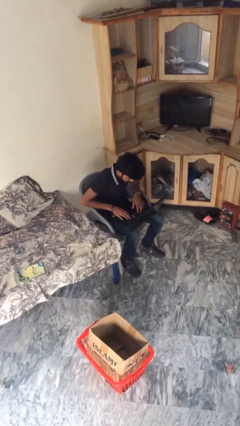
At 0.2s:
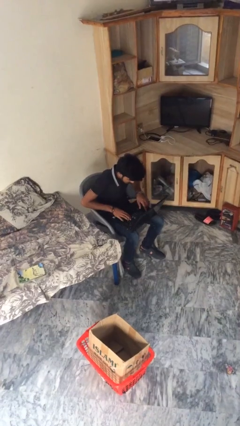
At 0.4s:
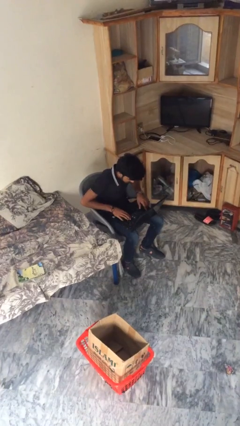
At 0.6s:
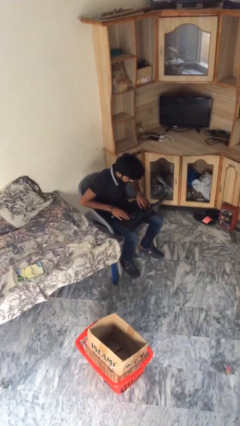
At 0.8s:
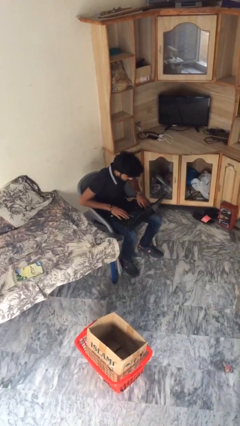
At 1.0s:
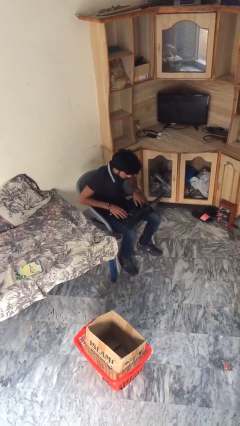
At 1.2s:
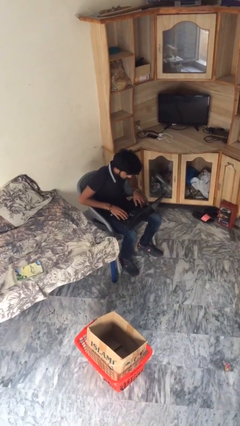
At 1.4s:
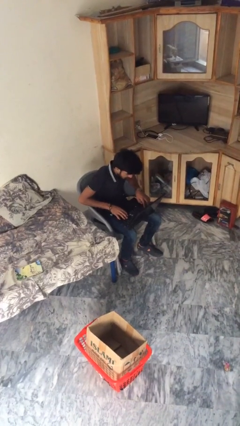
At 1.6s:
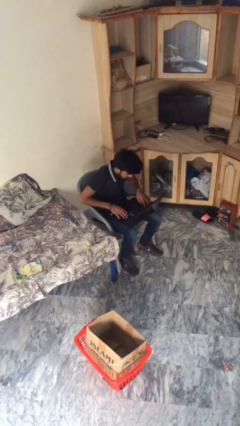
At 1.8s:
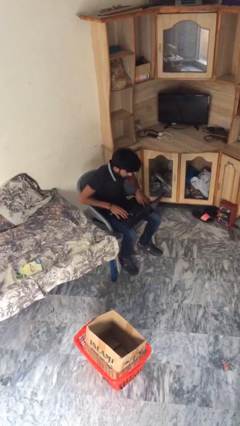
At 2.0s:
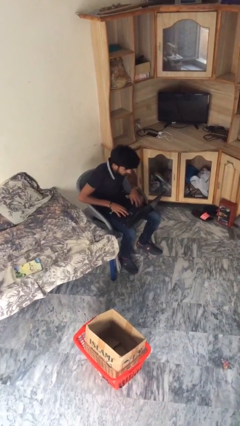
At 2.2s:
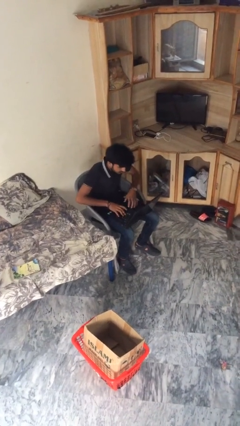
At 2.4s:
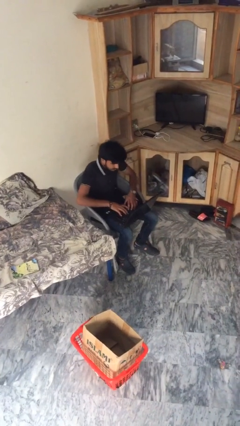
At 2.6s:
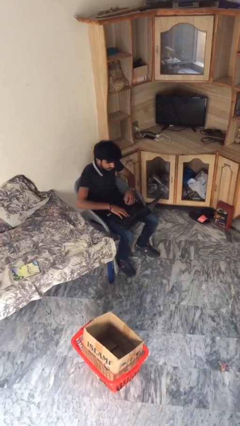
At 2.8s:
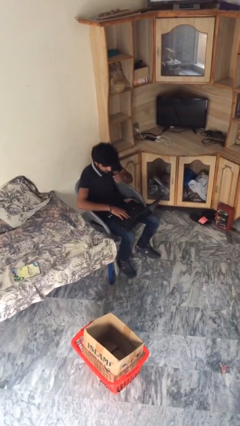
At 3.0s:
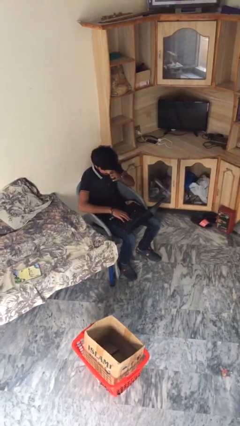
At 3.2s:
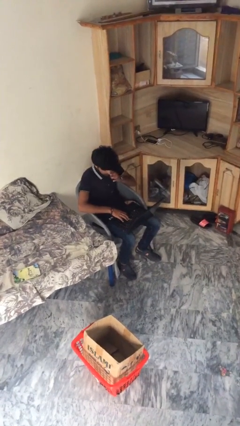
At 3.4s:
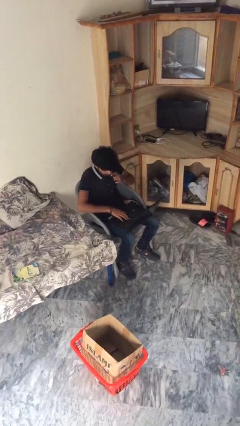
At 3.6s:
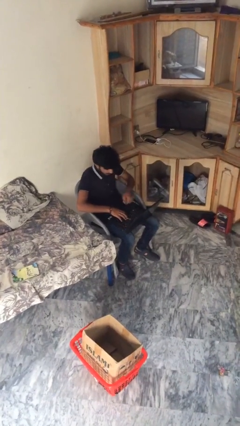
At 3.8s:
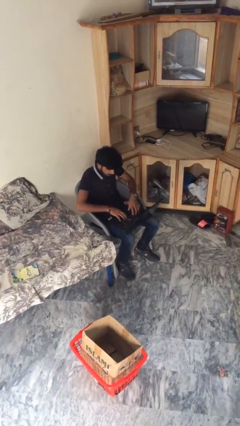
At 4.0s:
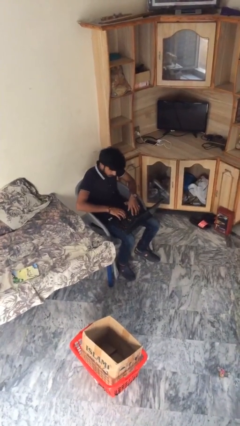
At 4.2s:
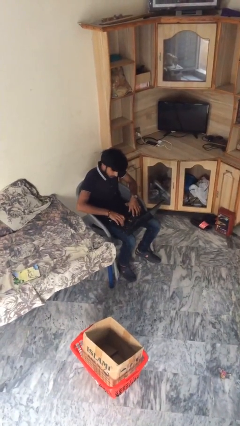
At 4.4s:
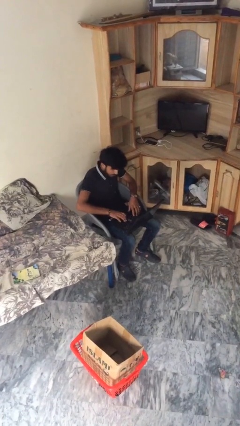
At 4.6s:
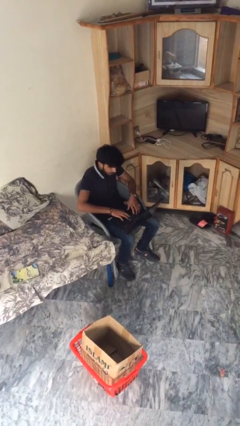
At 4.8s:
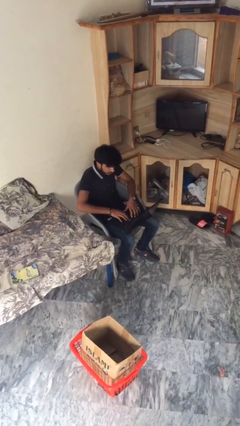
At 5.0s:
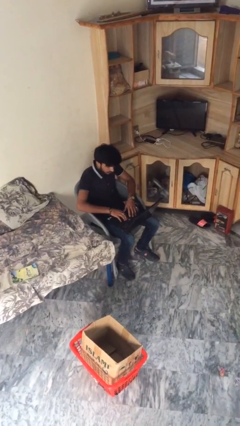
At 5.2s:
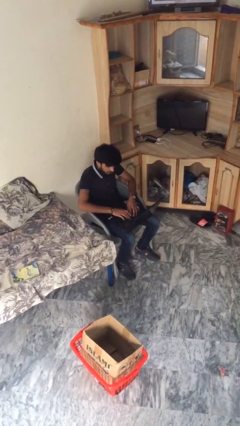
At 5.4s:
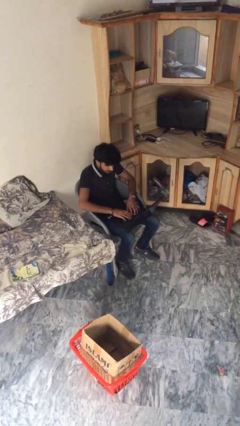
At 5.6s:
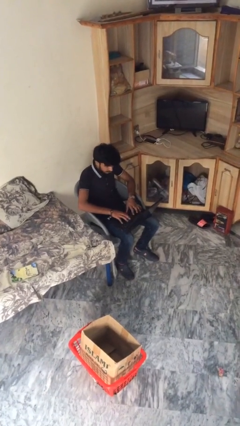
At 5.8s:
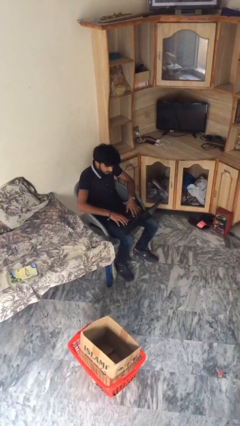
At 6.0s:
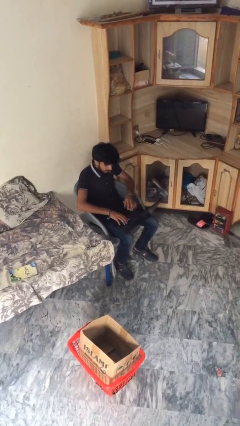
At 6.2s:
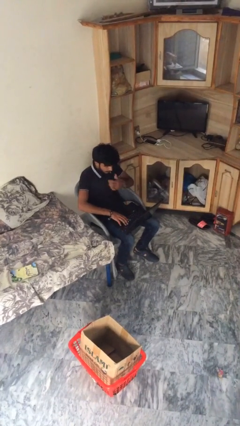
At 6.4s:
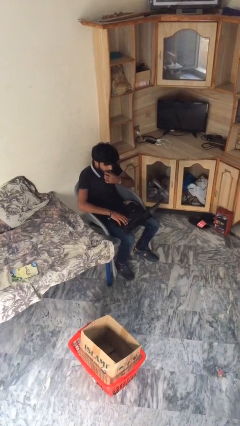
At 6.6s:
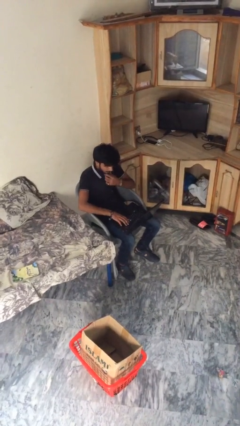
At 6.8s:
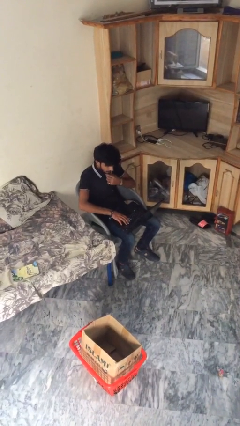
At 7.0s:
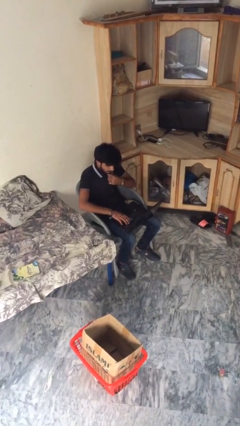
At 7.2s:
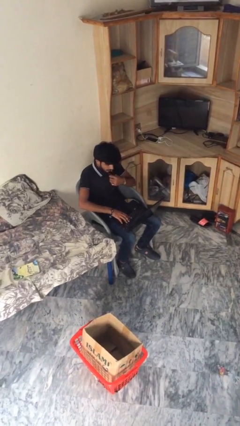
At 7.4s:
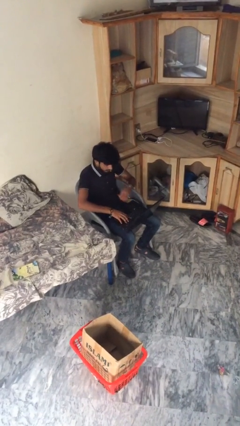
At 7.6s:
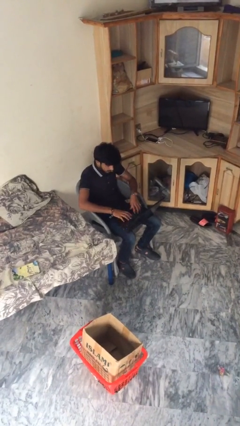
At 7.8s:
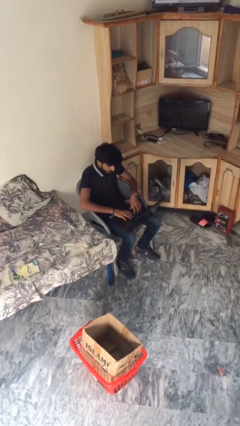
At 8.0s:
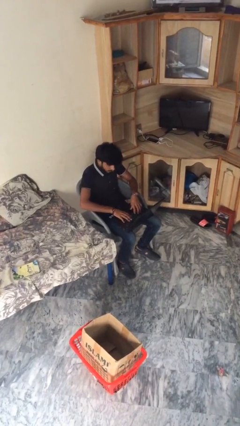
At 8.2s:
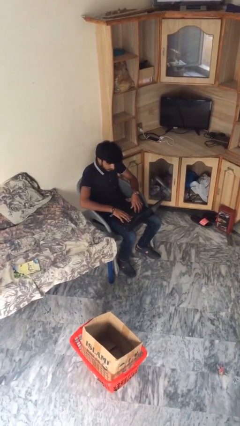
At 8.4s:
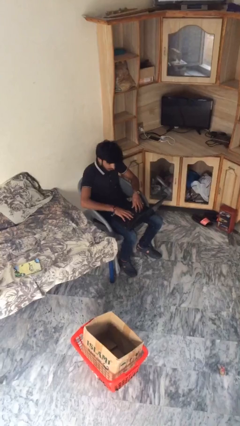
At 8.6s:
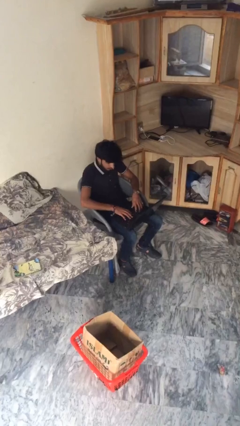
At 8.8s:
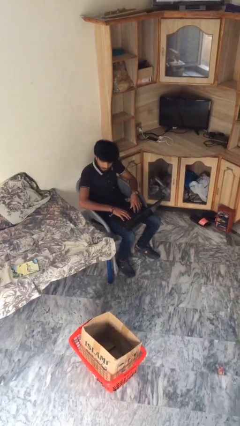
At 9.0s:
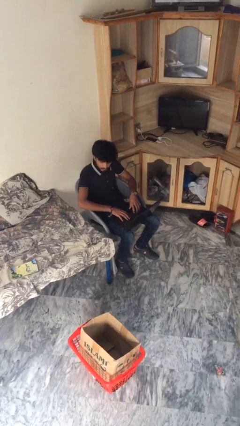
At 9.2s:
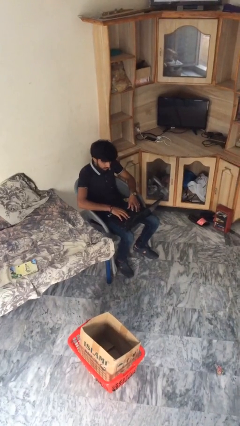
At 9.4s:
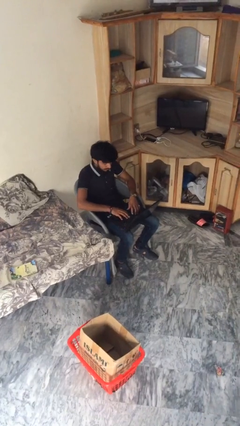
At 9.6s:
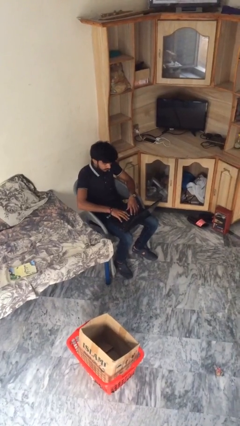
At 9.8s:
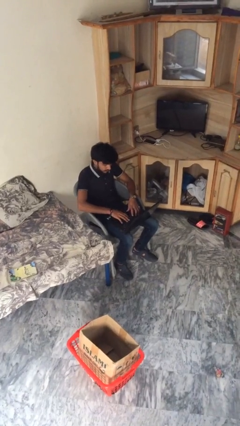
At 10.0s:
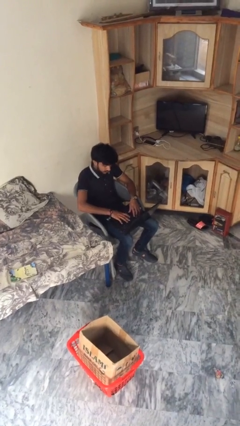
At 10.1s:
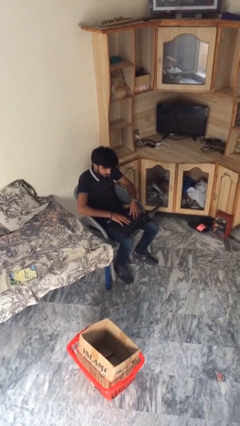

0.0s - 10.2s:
person interacts with laptop

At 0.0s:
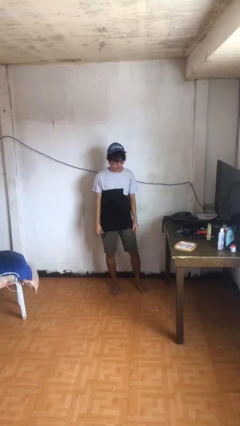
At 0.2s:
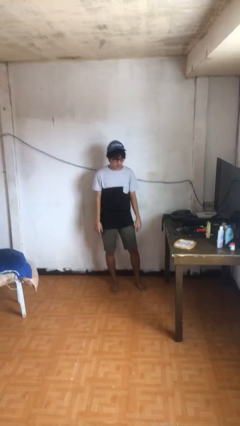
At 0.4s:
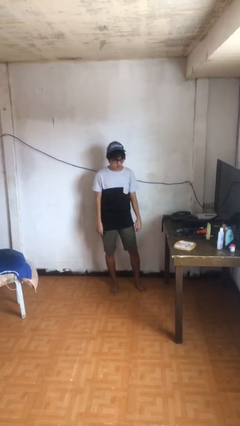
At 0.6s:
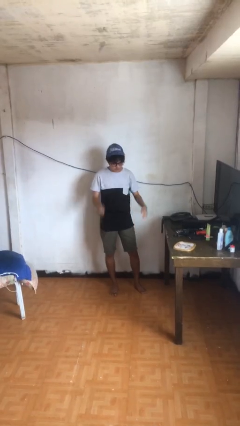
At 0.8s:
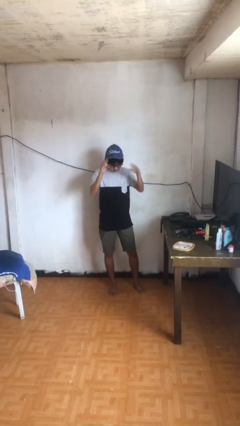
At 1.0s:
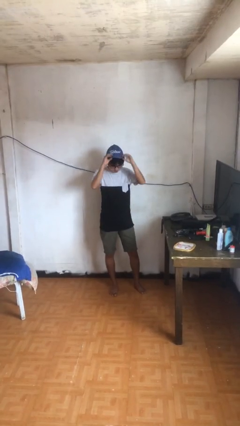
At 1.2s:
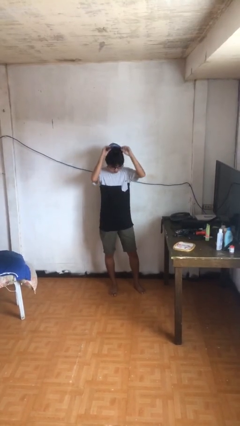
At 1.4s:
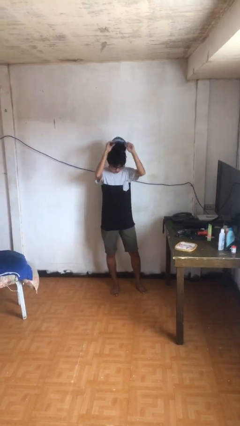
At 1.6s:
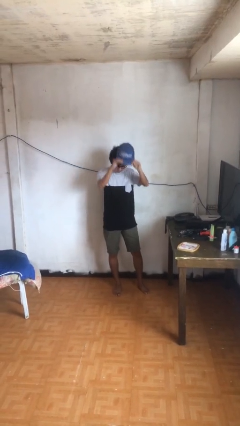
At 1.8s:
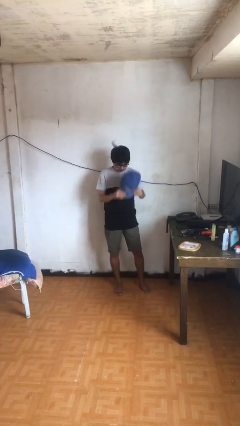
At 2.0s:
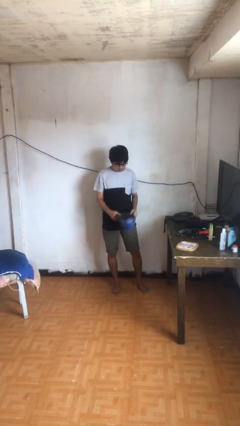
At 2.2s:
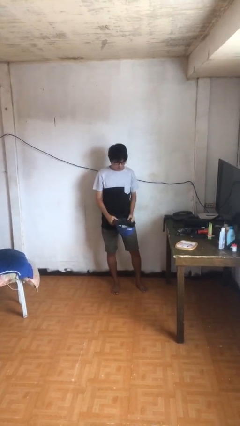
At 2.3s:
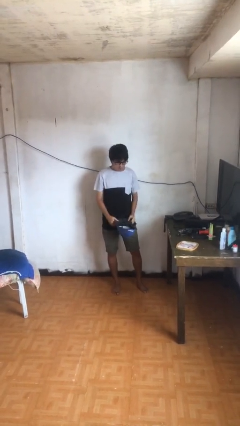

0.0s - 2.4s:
person takes off hat

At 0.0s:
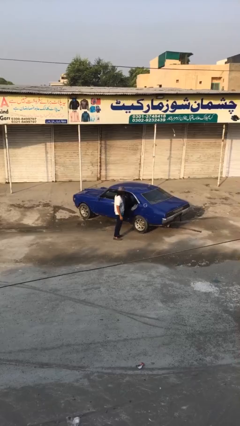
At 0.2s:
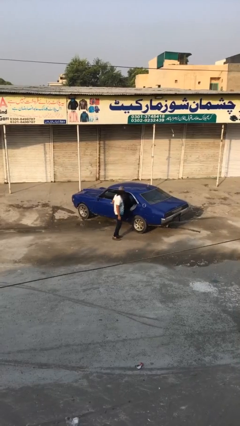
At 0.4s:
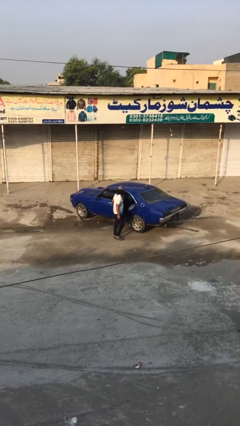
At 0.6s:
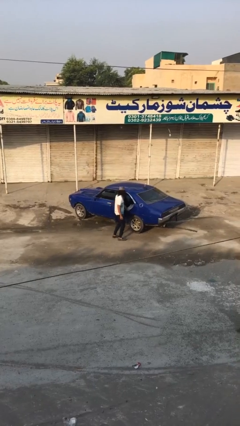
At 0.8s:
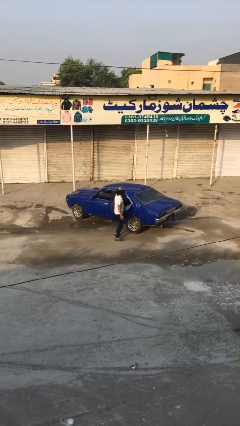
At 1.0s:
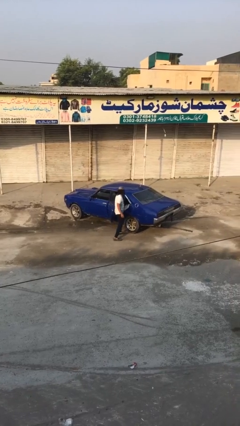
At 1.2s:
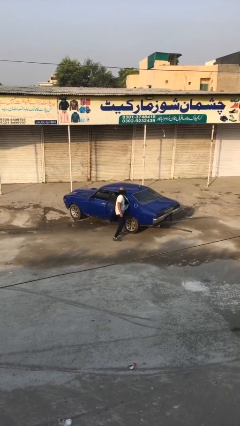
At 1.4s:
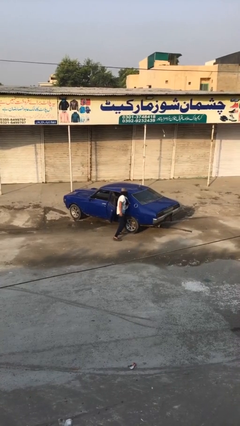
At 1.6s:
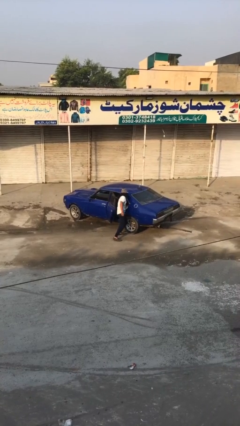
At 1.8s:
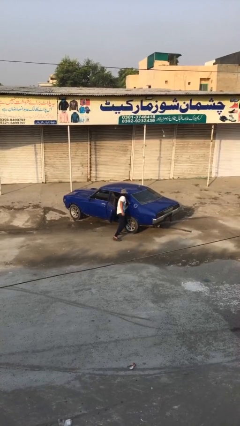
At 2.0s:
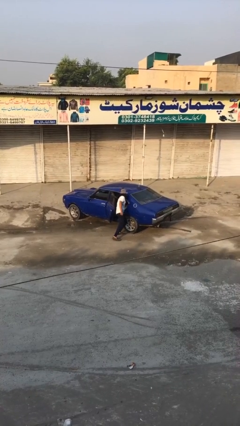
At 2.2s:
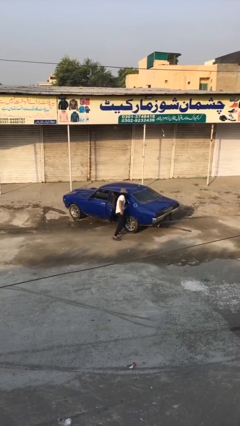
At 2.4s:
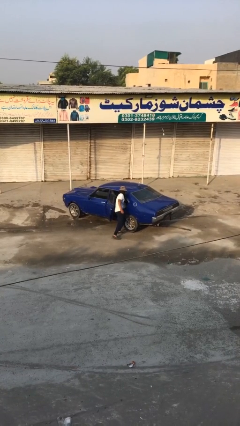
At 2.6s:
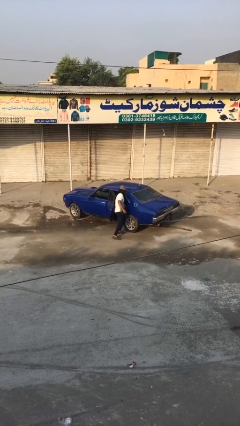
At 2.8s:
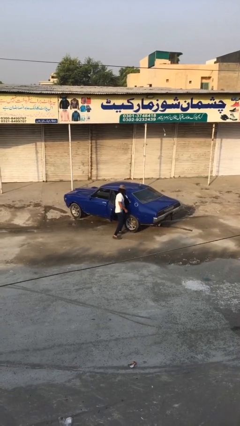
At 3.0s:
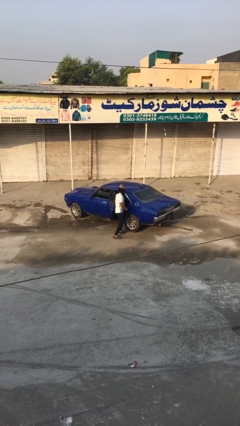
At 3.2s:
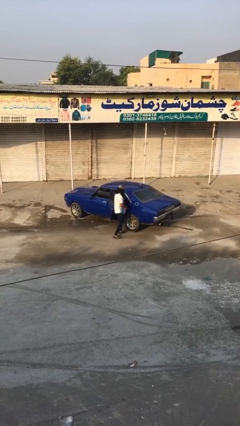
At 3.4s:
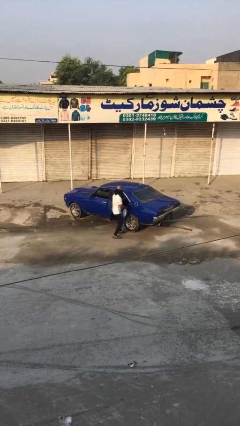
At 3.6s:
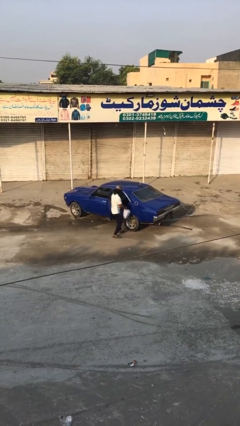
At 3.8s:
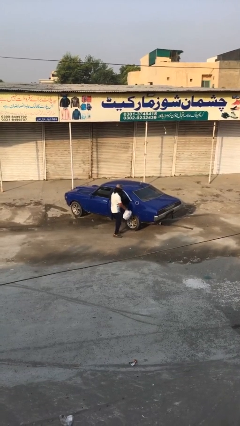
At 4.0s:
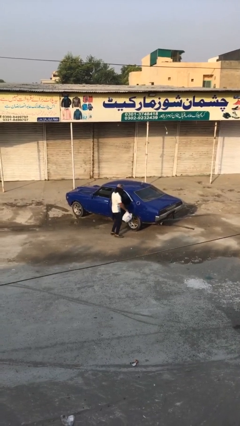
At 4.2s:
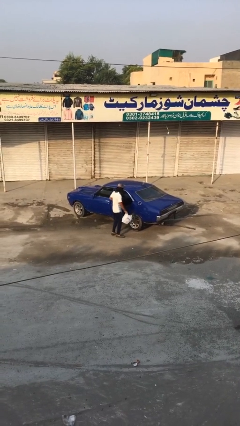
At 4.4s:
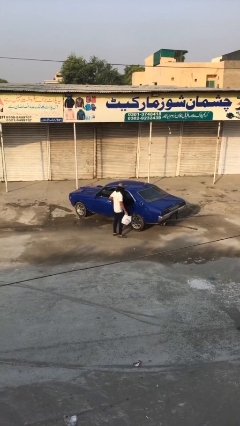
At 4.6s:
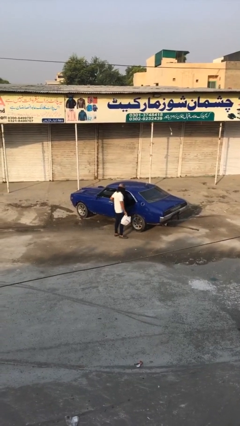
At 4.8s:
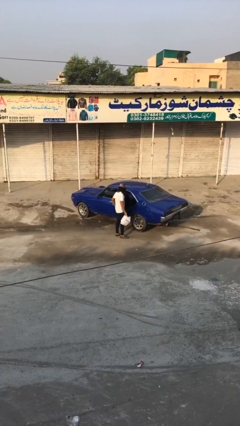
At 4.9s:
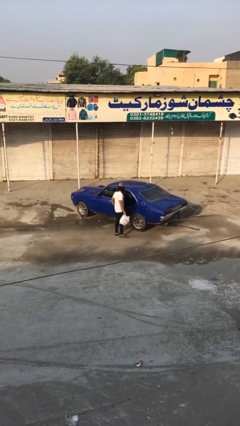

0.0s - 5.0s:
person unloads car

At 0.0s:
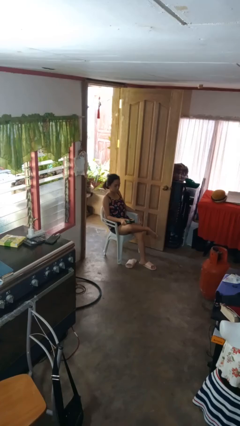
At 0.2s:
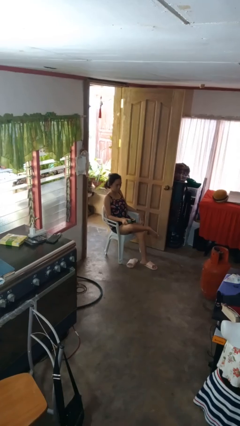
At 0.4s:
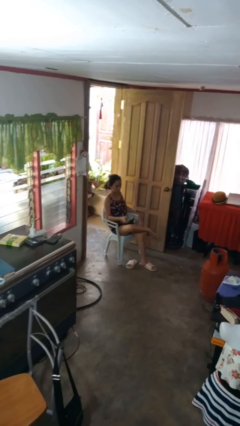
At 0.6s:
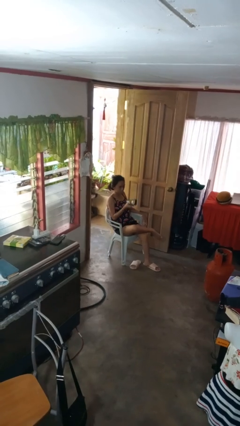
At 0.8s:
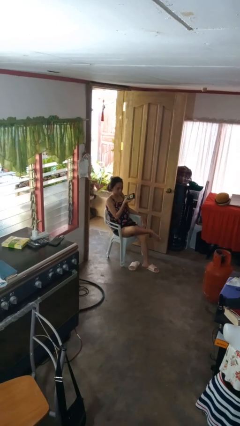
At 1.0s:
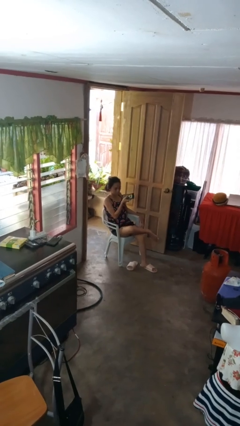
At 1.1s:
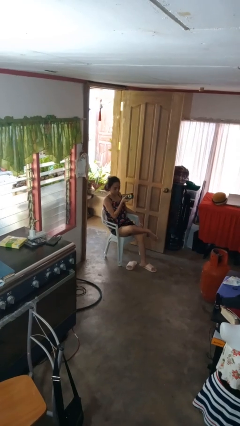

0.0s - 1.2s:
person uses television remote
